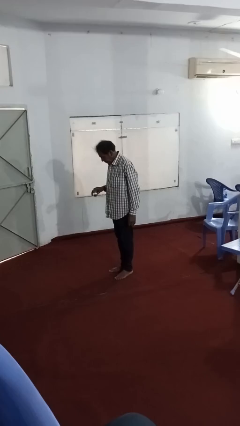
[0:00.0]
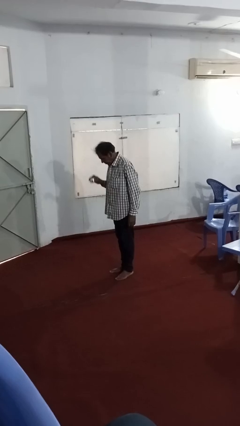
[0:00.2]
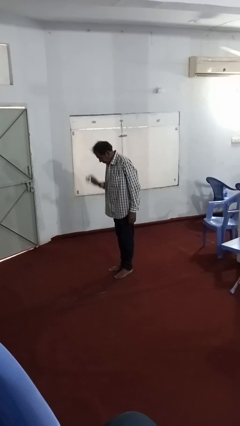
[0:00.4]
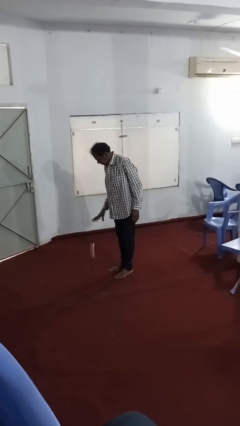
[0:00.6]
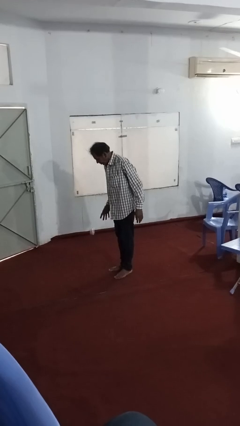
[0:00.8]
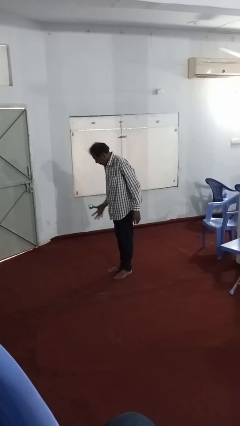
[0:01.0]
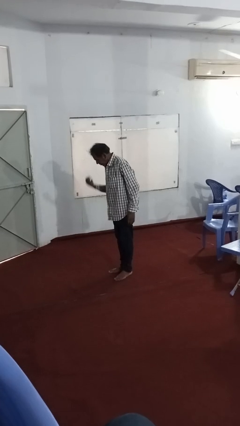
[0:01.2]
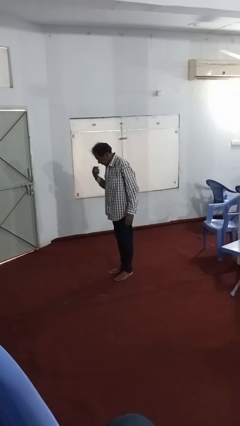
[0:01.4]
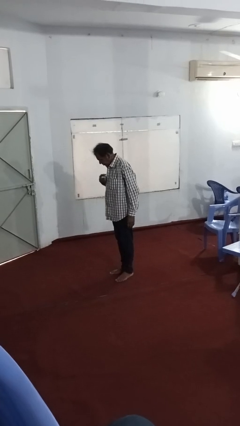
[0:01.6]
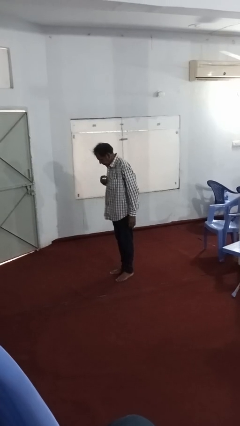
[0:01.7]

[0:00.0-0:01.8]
person bounces ball on floor

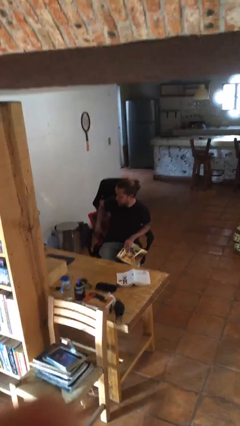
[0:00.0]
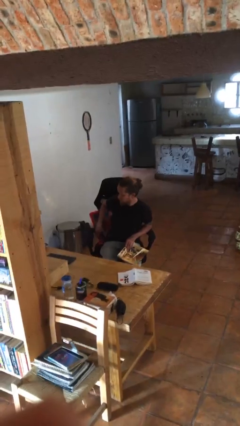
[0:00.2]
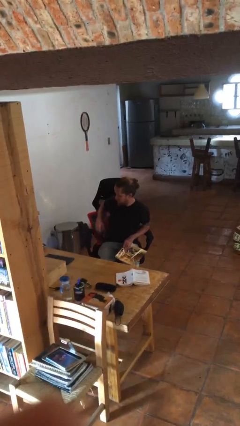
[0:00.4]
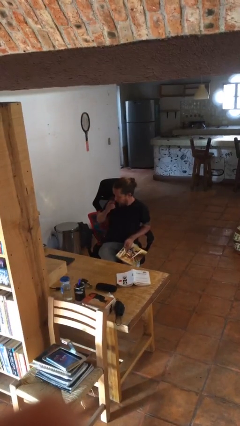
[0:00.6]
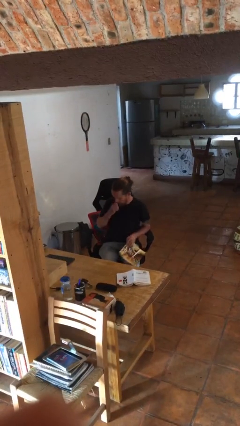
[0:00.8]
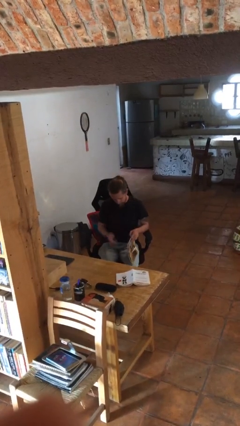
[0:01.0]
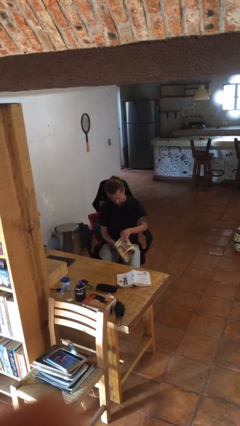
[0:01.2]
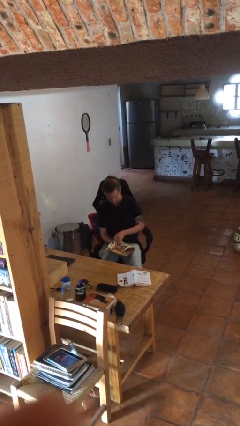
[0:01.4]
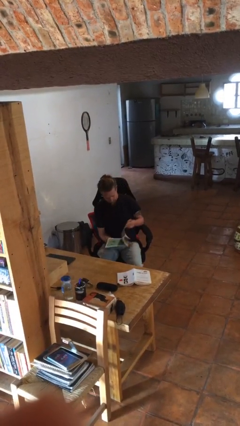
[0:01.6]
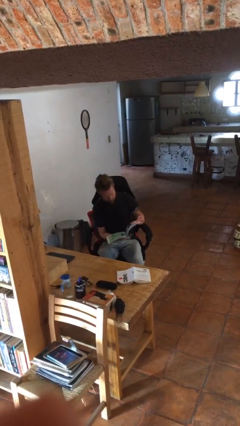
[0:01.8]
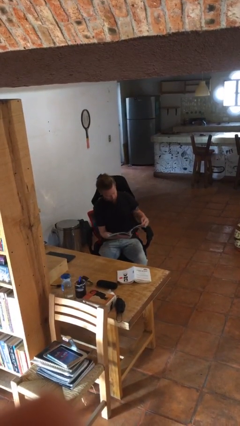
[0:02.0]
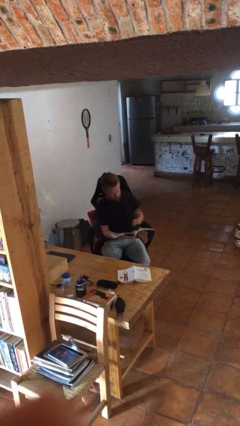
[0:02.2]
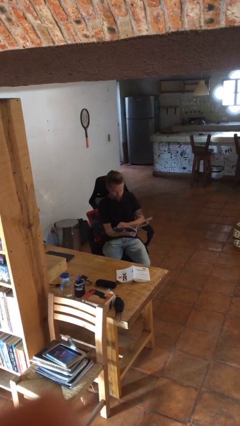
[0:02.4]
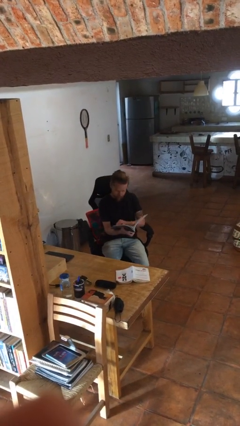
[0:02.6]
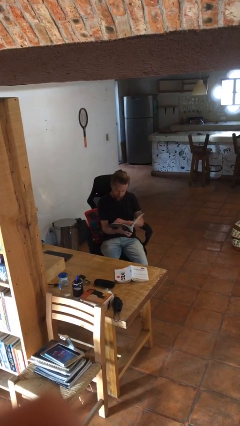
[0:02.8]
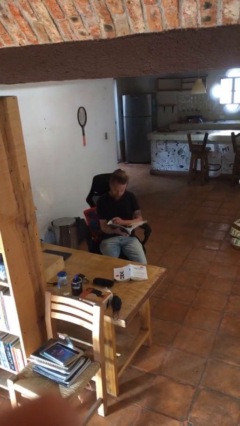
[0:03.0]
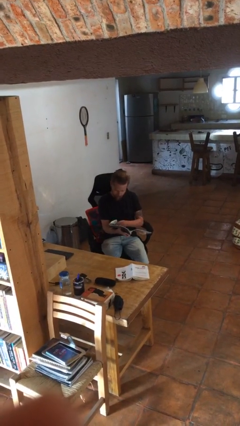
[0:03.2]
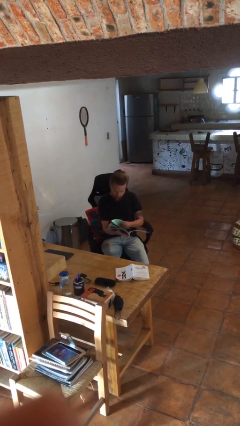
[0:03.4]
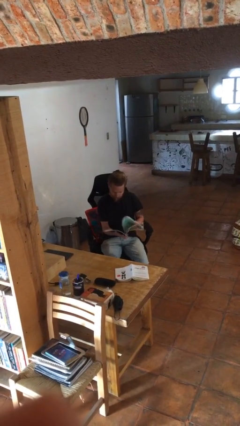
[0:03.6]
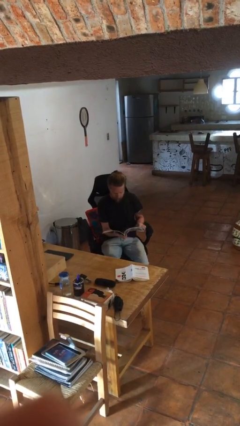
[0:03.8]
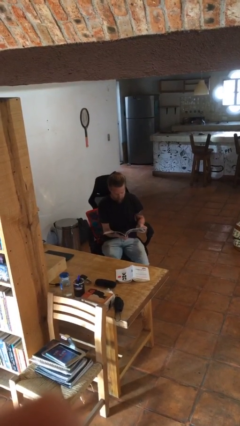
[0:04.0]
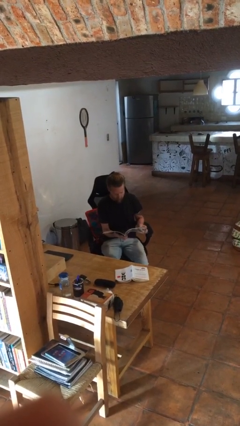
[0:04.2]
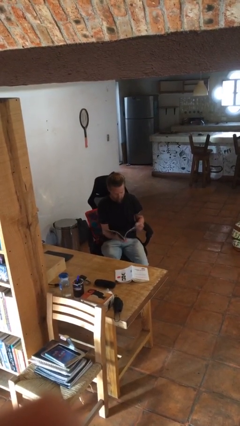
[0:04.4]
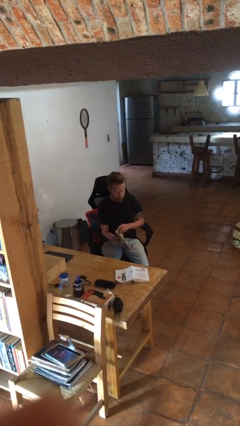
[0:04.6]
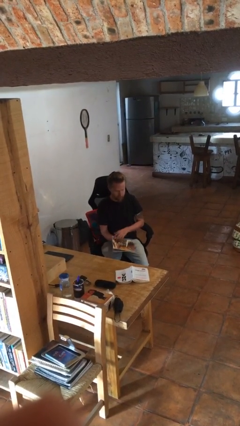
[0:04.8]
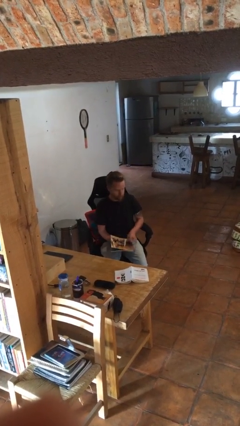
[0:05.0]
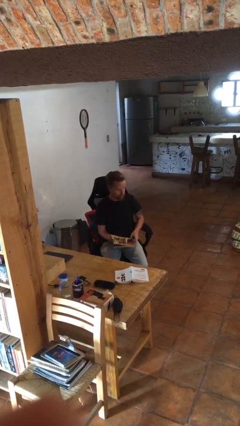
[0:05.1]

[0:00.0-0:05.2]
person reads magazine

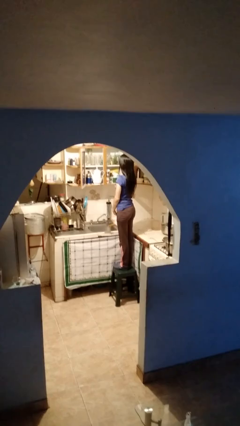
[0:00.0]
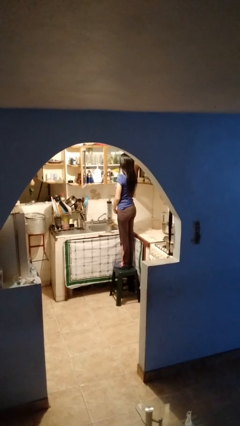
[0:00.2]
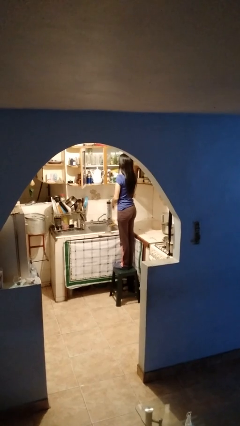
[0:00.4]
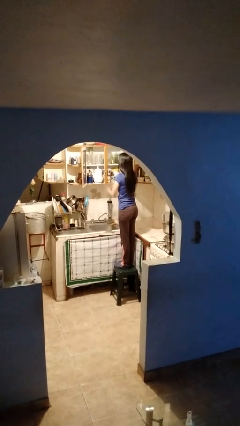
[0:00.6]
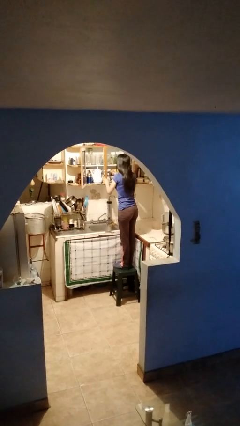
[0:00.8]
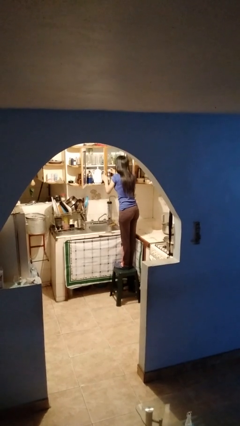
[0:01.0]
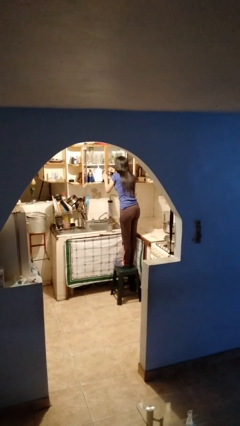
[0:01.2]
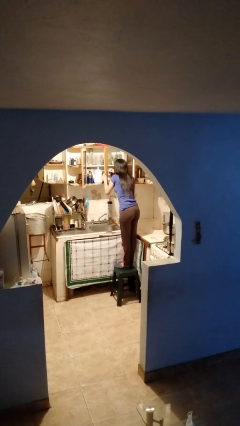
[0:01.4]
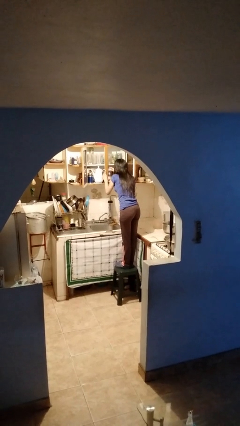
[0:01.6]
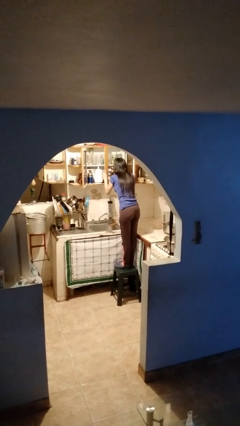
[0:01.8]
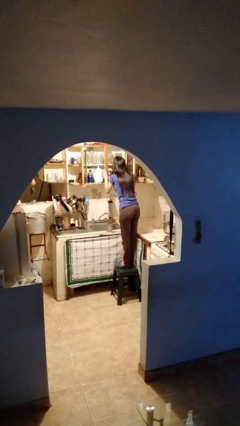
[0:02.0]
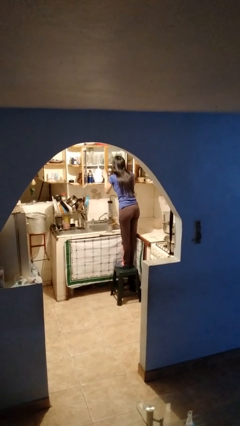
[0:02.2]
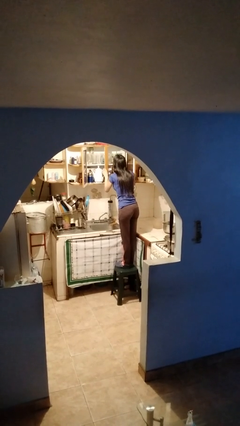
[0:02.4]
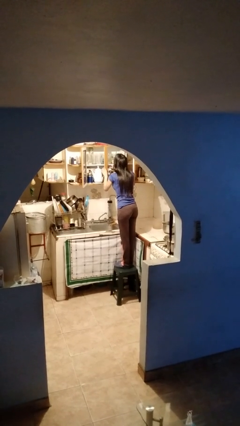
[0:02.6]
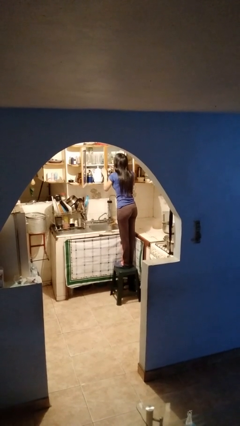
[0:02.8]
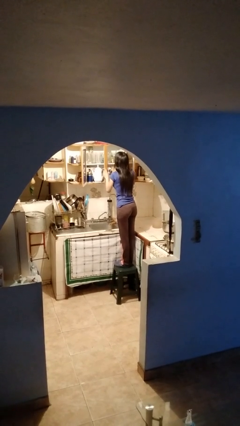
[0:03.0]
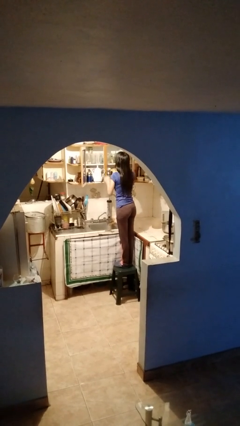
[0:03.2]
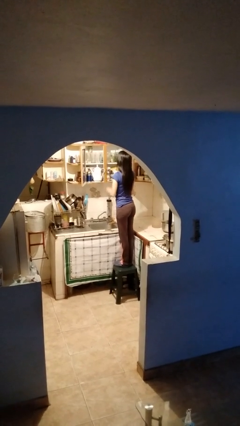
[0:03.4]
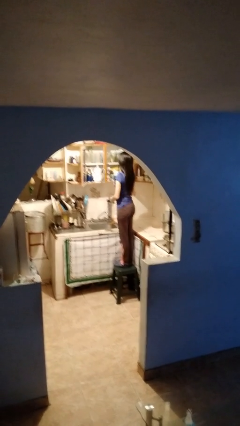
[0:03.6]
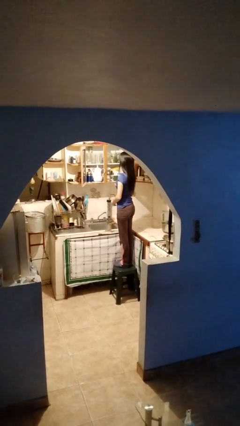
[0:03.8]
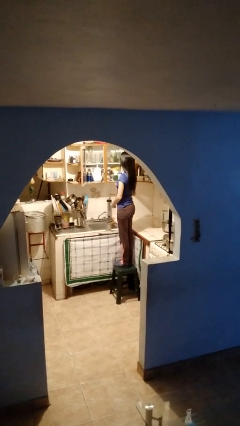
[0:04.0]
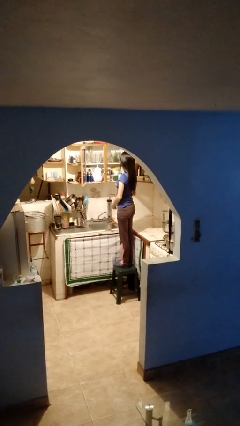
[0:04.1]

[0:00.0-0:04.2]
person searches in cabinet

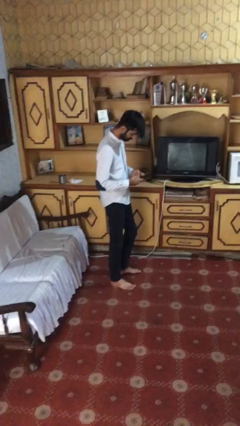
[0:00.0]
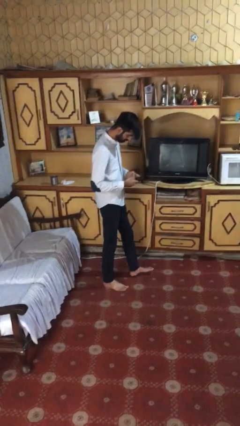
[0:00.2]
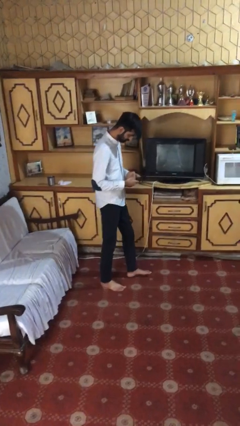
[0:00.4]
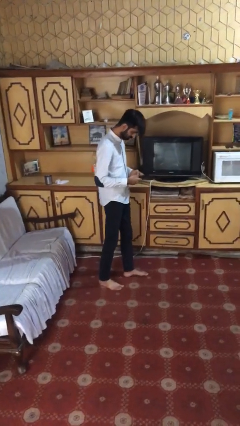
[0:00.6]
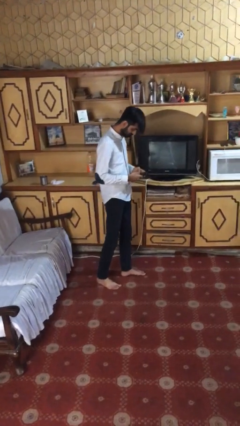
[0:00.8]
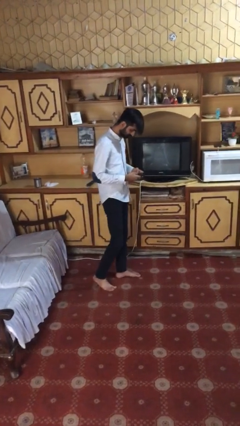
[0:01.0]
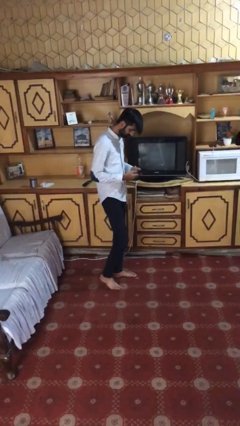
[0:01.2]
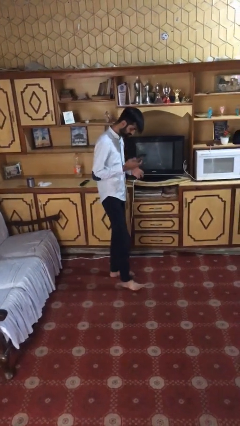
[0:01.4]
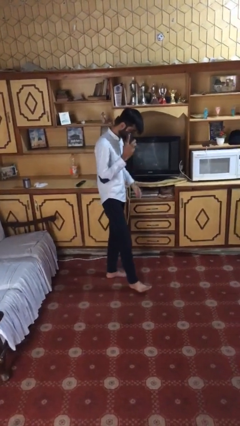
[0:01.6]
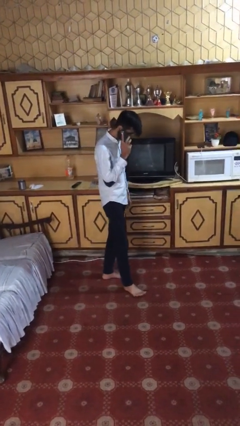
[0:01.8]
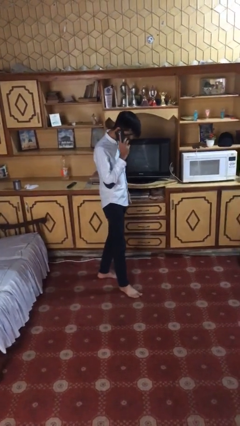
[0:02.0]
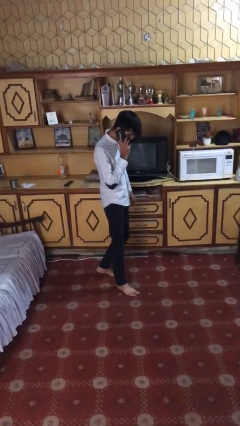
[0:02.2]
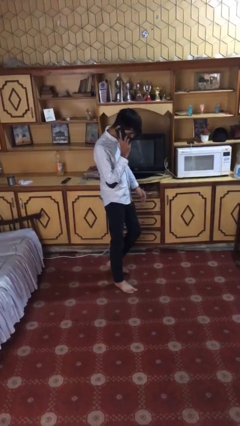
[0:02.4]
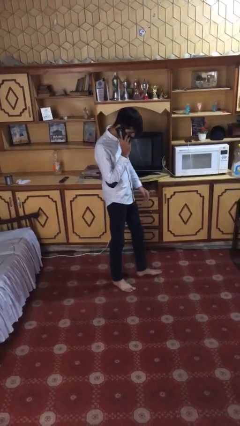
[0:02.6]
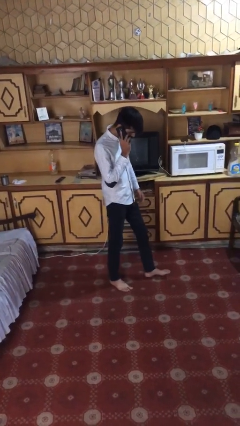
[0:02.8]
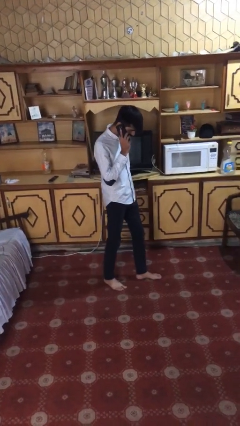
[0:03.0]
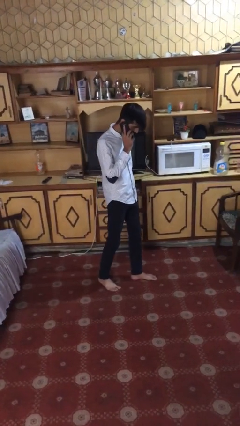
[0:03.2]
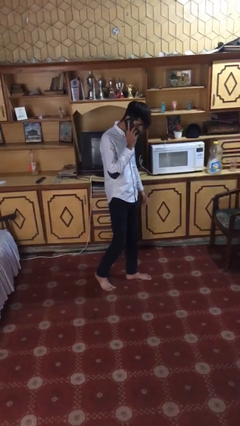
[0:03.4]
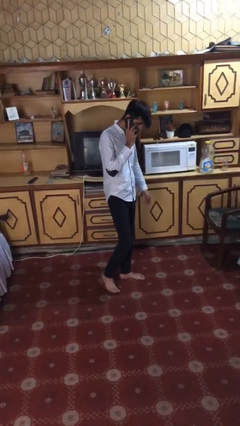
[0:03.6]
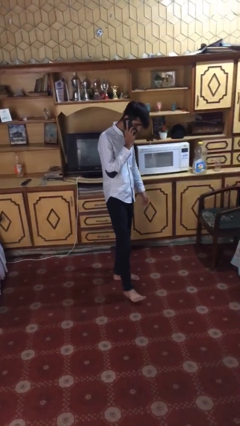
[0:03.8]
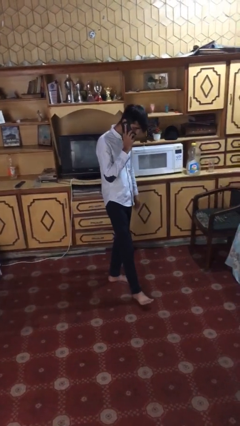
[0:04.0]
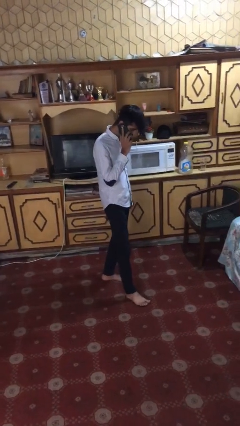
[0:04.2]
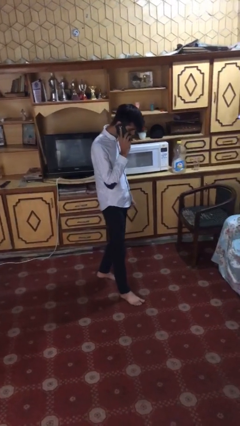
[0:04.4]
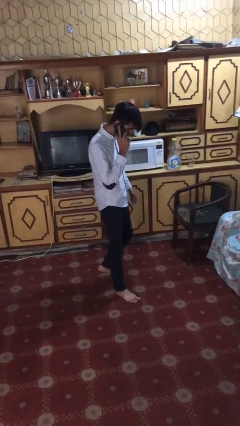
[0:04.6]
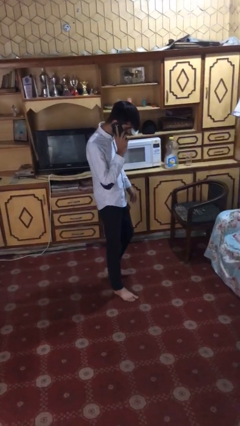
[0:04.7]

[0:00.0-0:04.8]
person talks on phone

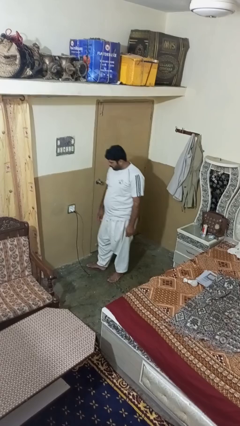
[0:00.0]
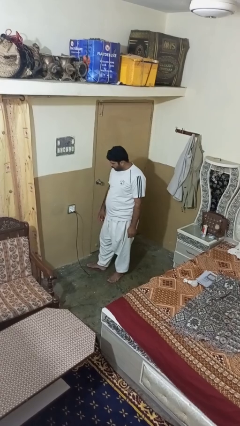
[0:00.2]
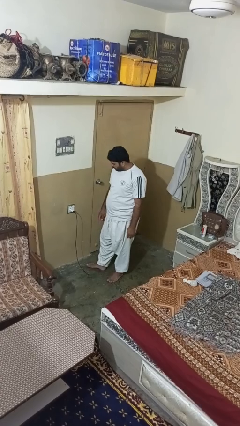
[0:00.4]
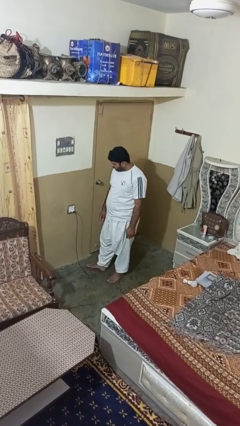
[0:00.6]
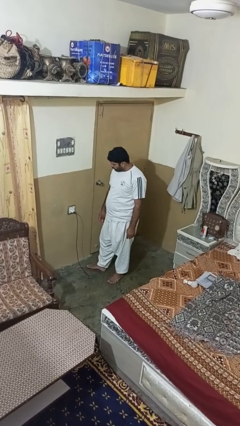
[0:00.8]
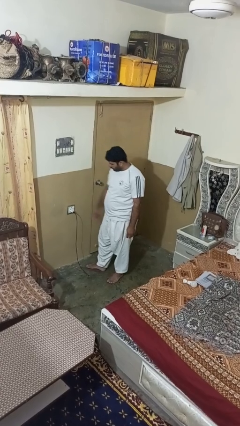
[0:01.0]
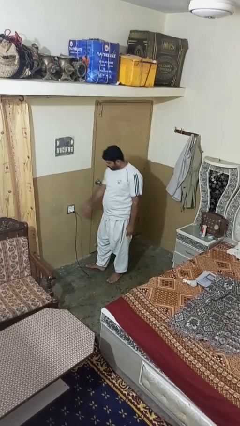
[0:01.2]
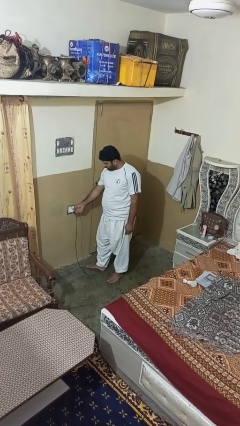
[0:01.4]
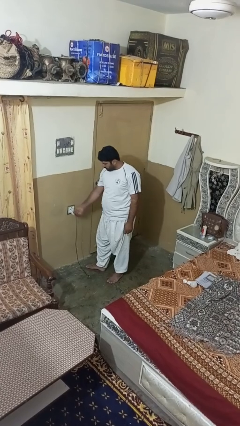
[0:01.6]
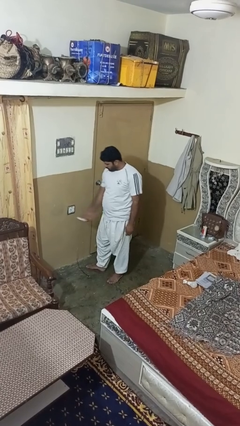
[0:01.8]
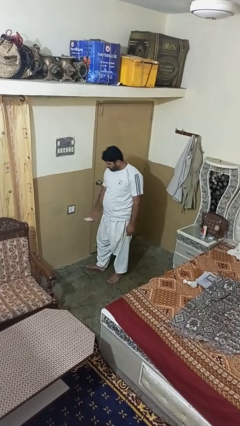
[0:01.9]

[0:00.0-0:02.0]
person unplugs from electrical socket
